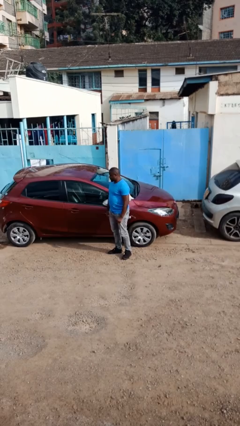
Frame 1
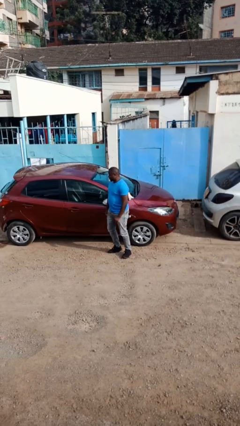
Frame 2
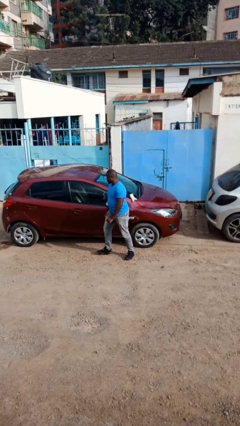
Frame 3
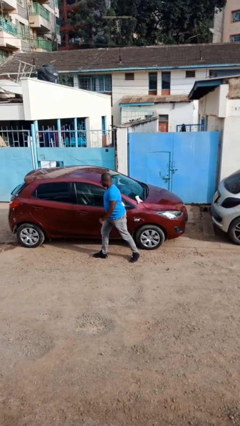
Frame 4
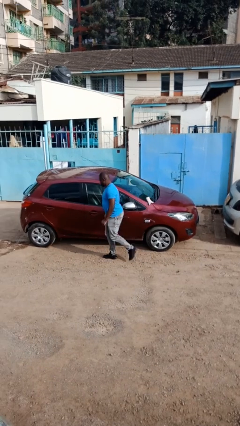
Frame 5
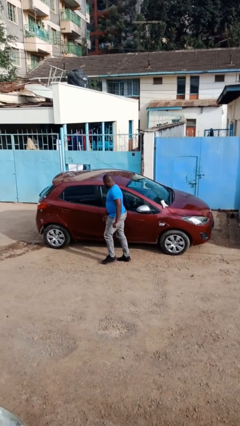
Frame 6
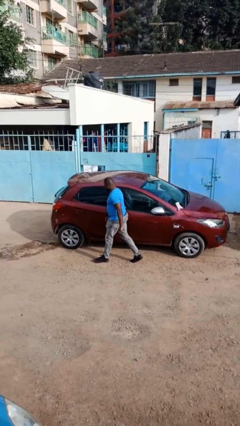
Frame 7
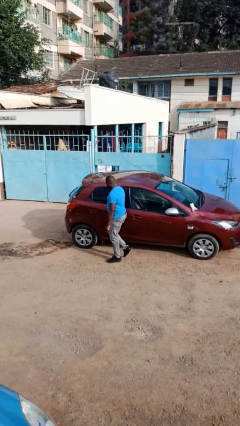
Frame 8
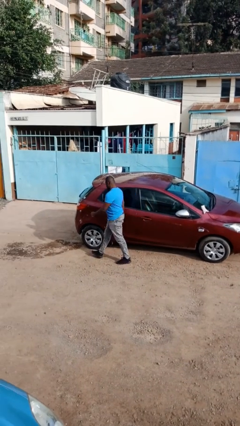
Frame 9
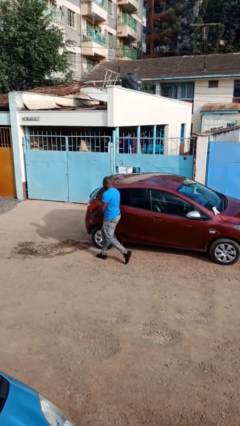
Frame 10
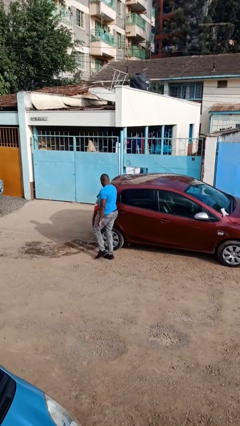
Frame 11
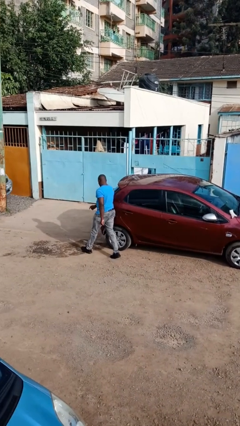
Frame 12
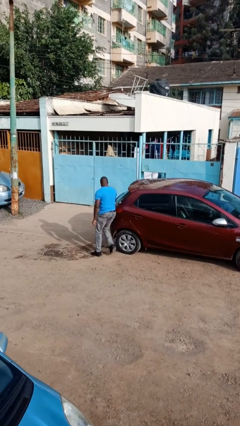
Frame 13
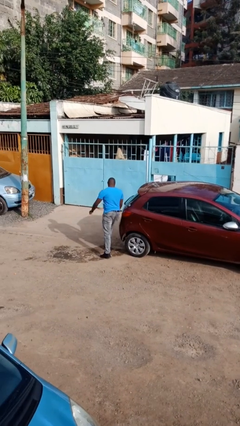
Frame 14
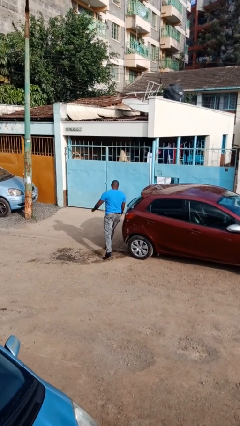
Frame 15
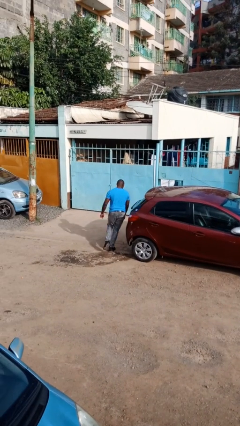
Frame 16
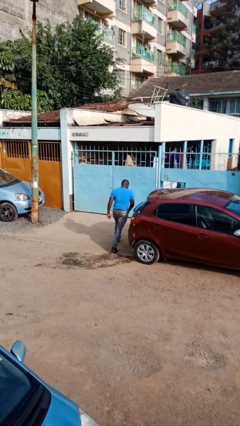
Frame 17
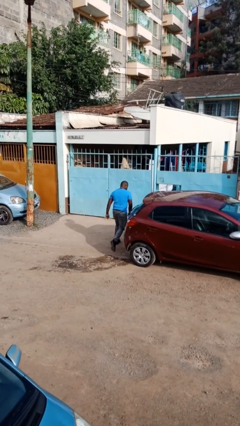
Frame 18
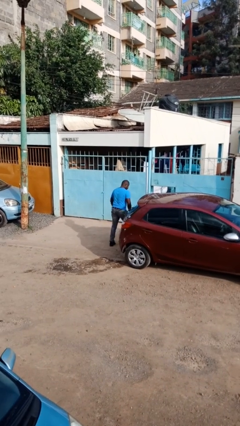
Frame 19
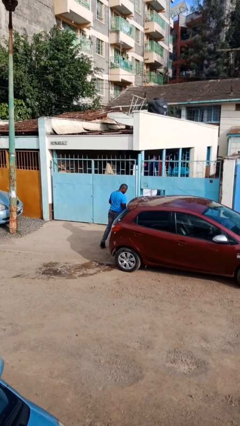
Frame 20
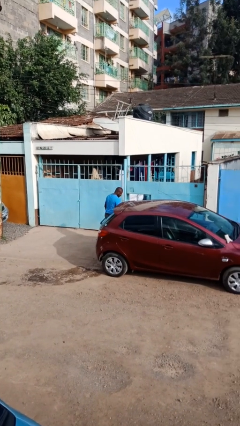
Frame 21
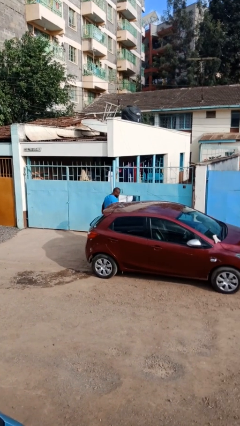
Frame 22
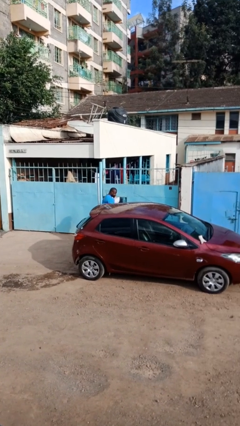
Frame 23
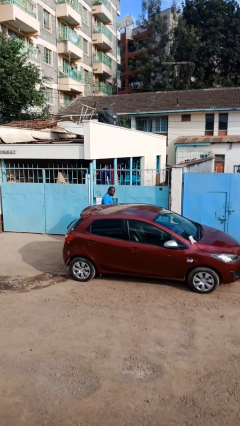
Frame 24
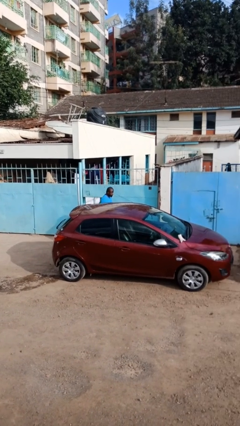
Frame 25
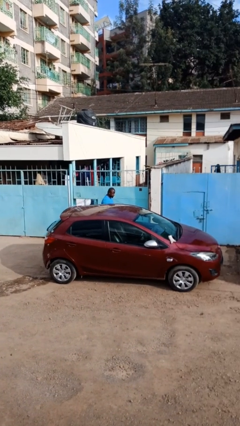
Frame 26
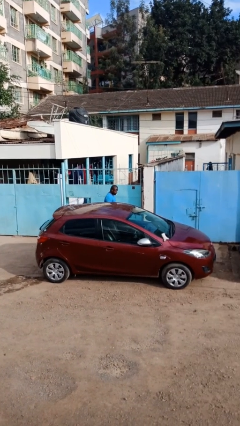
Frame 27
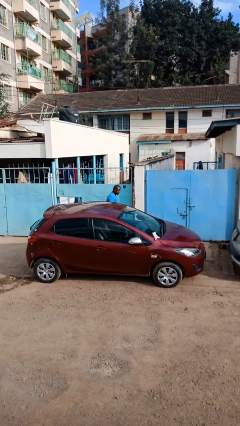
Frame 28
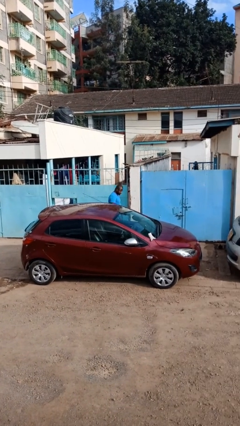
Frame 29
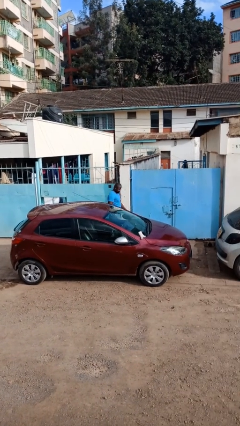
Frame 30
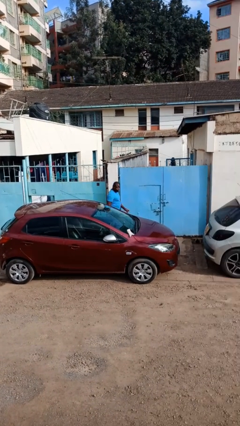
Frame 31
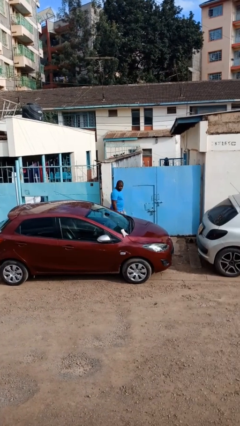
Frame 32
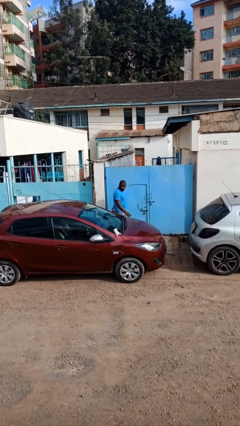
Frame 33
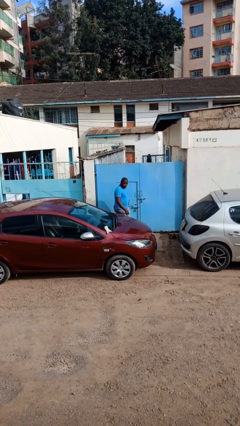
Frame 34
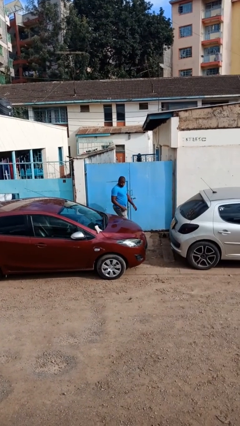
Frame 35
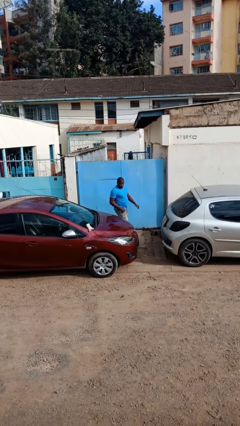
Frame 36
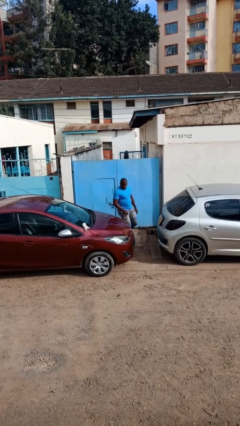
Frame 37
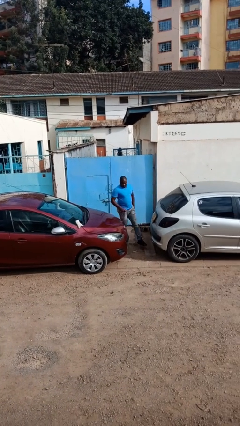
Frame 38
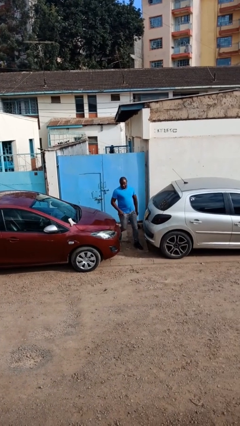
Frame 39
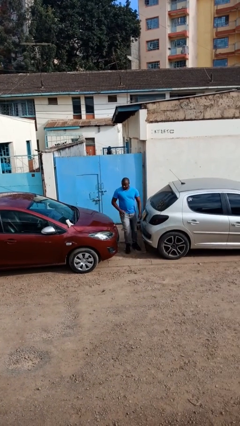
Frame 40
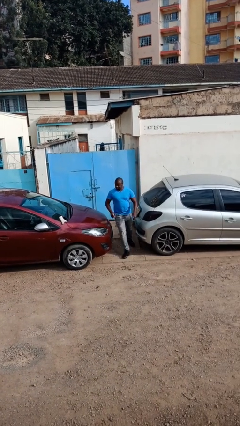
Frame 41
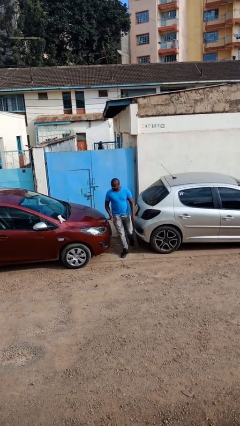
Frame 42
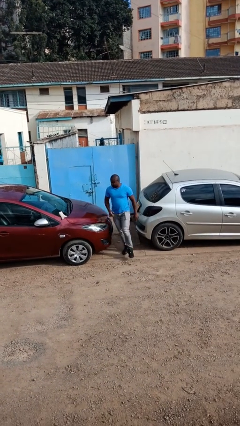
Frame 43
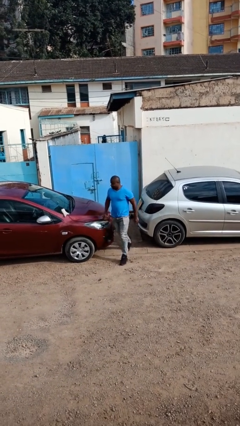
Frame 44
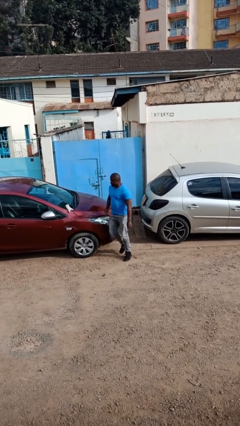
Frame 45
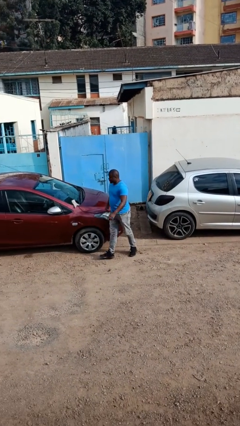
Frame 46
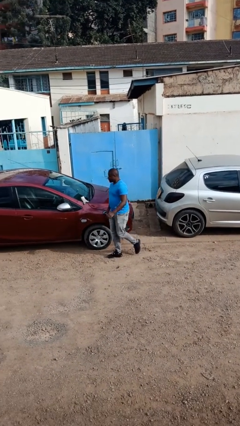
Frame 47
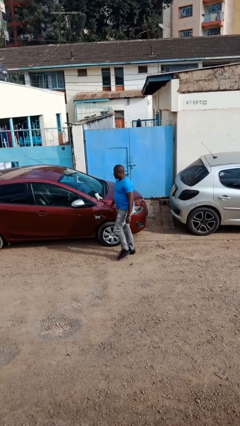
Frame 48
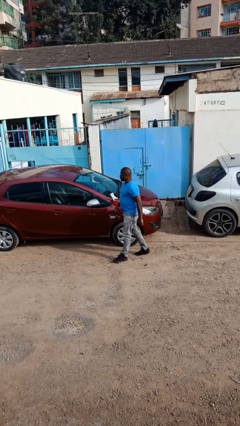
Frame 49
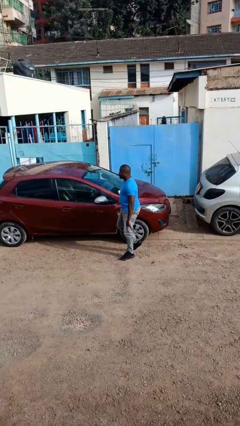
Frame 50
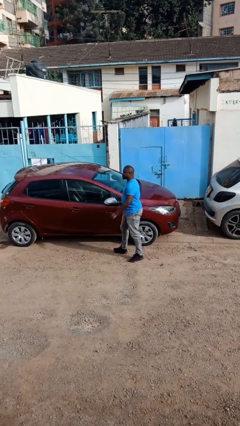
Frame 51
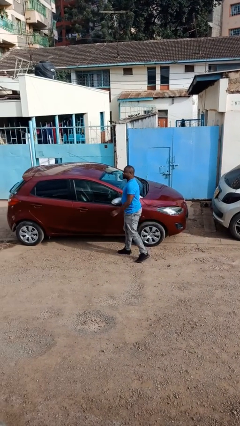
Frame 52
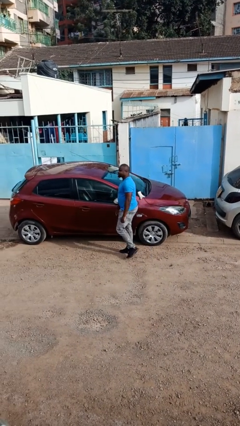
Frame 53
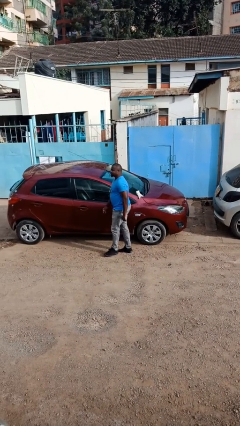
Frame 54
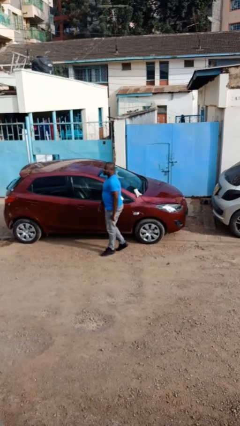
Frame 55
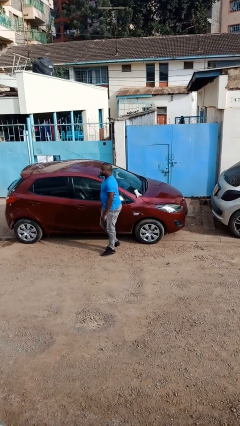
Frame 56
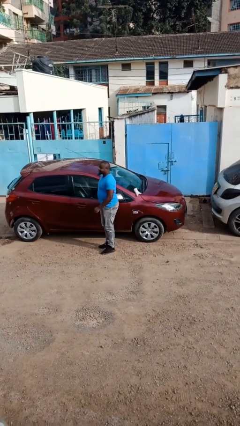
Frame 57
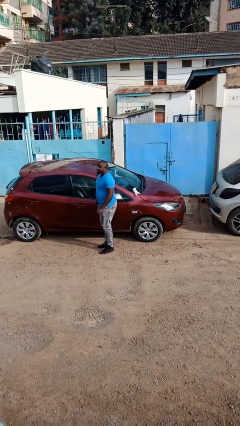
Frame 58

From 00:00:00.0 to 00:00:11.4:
person walks around car

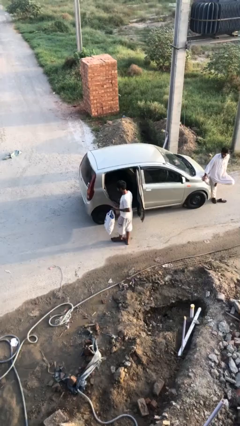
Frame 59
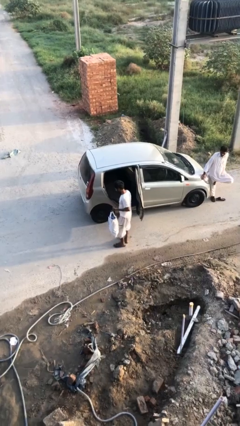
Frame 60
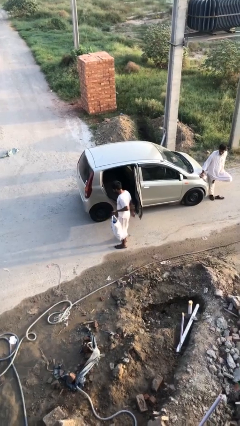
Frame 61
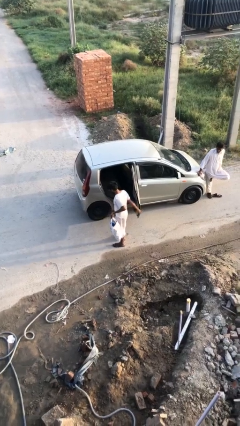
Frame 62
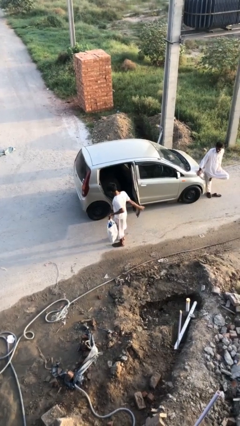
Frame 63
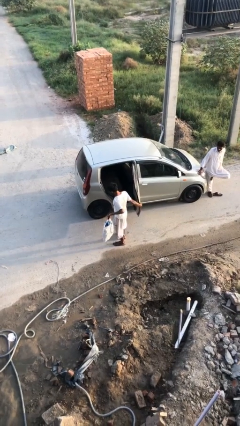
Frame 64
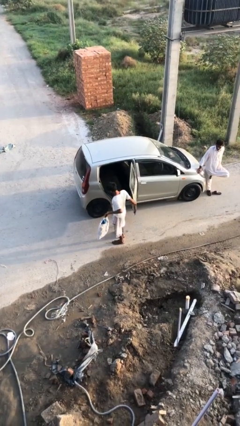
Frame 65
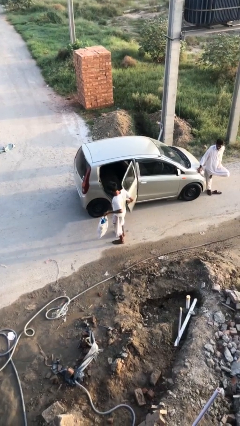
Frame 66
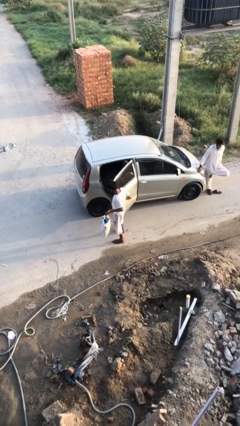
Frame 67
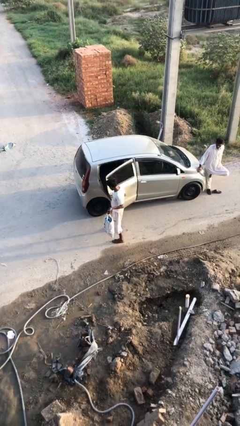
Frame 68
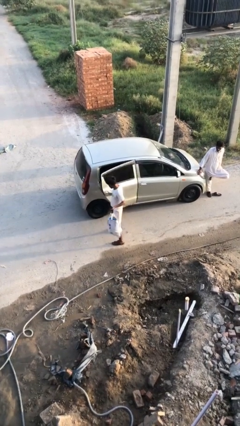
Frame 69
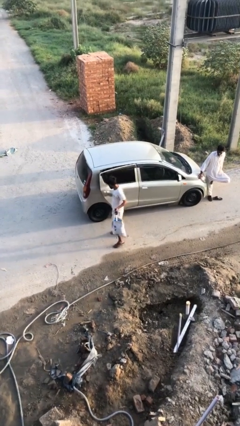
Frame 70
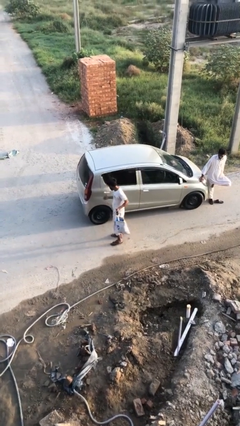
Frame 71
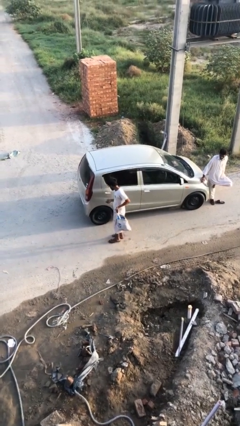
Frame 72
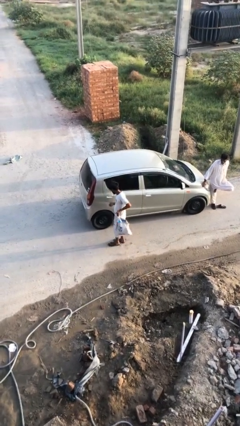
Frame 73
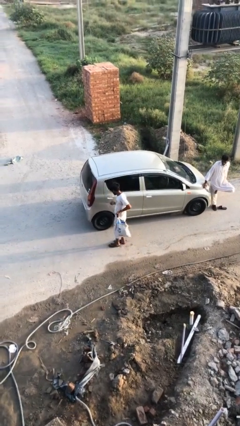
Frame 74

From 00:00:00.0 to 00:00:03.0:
person closes car door

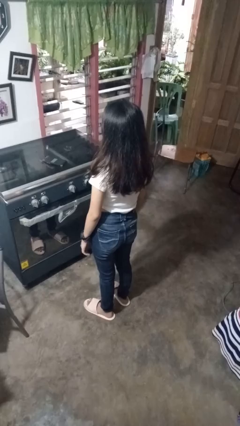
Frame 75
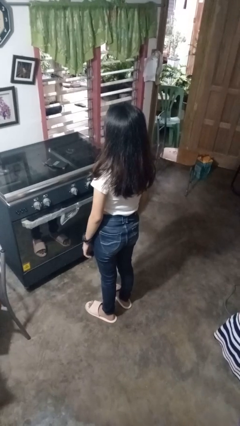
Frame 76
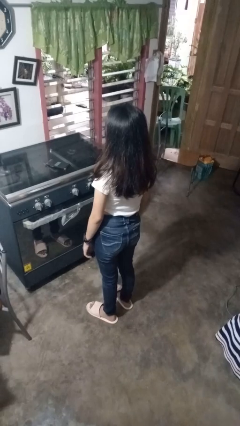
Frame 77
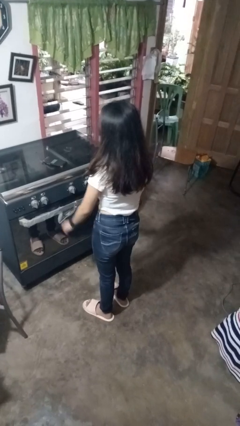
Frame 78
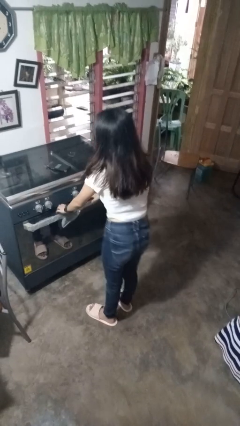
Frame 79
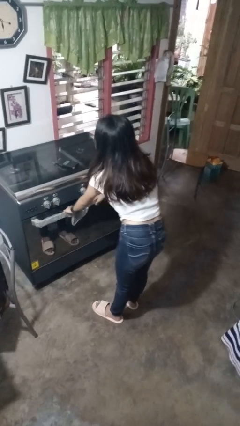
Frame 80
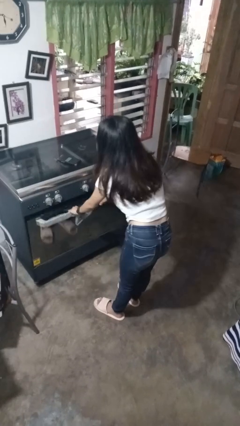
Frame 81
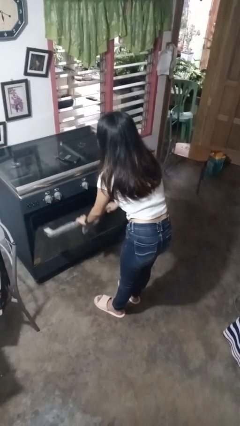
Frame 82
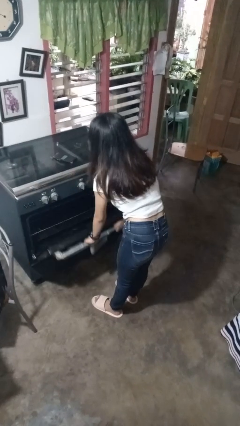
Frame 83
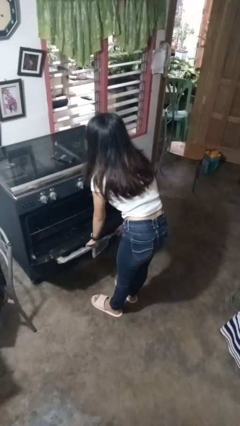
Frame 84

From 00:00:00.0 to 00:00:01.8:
person opens oven door

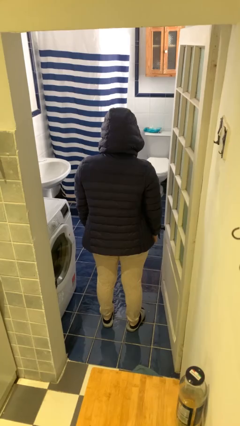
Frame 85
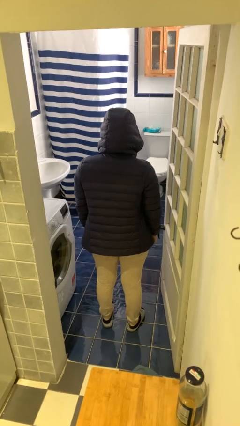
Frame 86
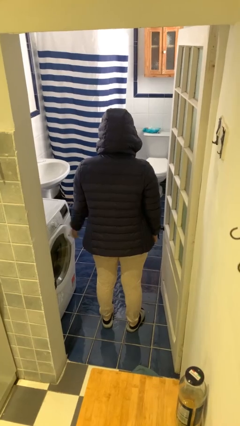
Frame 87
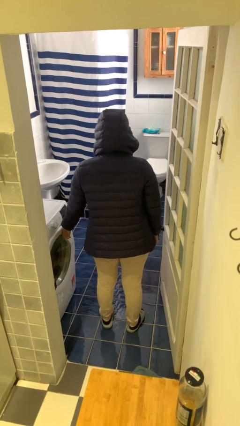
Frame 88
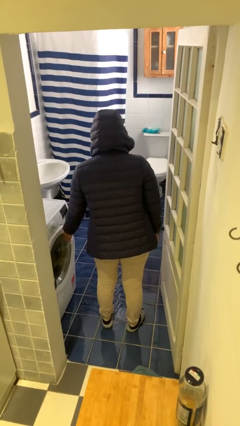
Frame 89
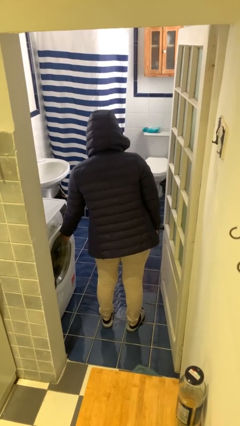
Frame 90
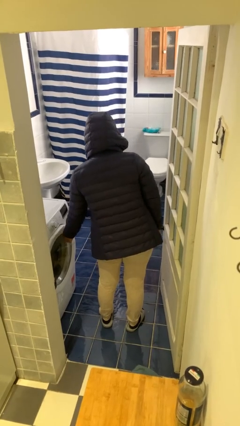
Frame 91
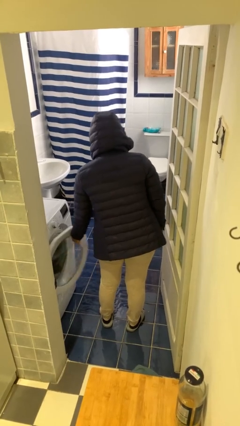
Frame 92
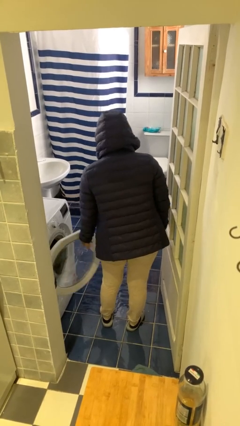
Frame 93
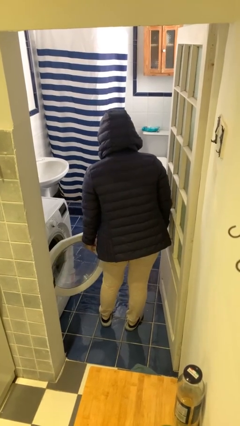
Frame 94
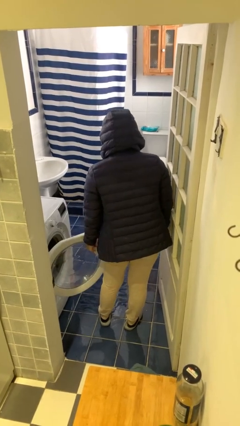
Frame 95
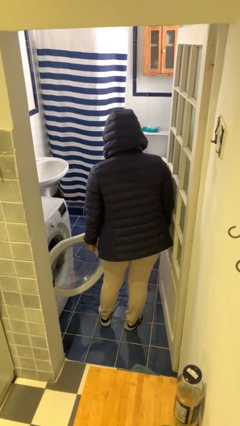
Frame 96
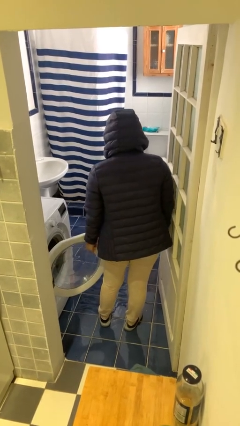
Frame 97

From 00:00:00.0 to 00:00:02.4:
person opens clothes washer
